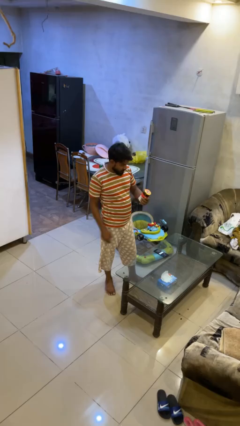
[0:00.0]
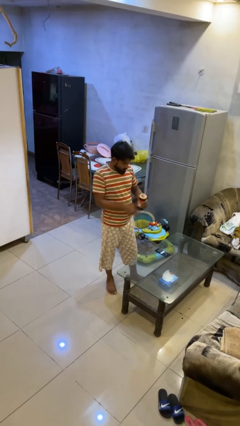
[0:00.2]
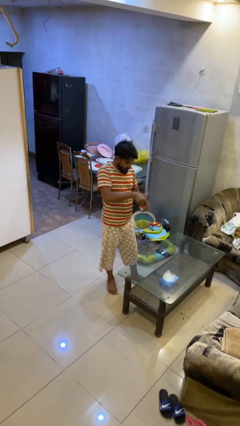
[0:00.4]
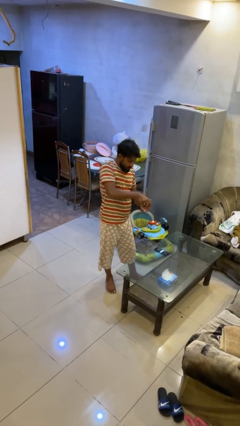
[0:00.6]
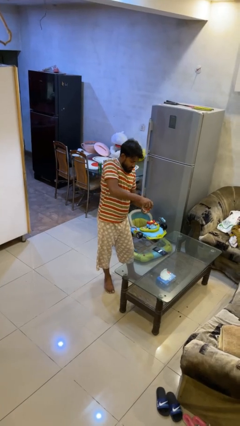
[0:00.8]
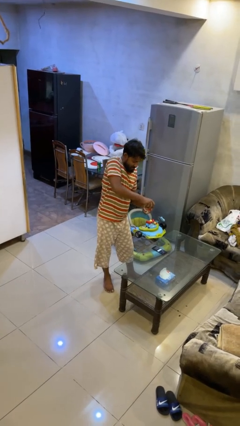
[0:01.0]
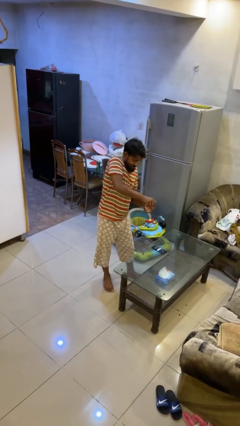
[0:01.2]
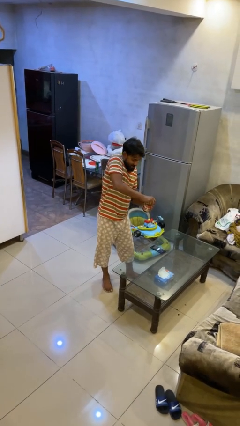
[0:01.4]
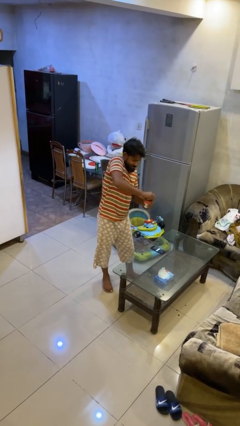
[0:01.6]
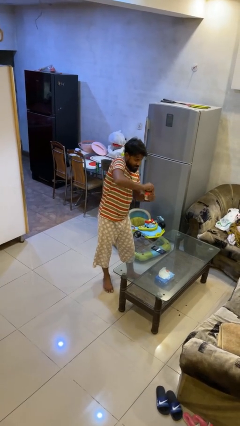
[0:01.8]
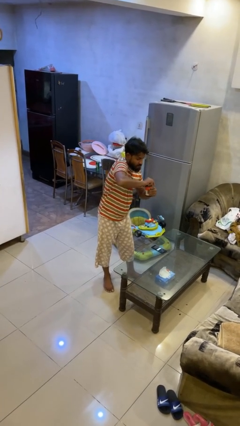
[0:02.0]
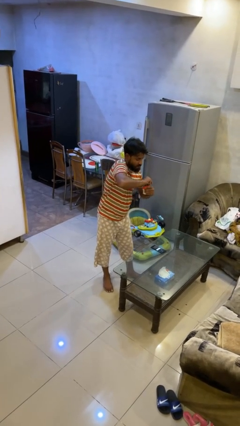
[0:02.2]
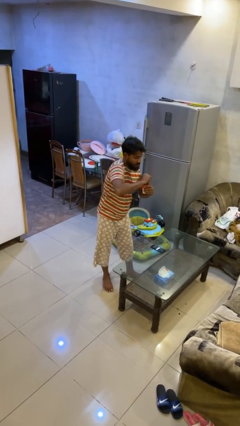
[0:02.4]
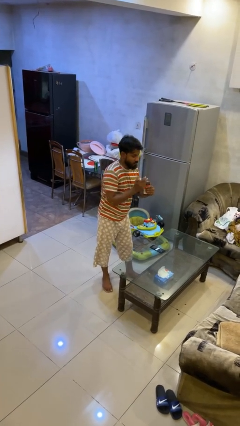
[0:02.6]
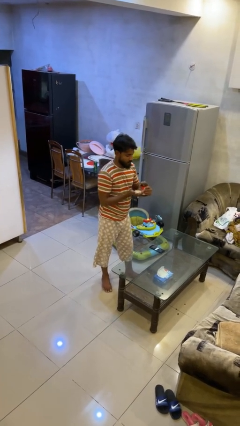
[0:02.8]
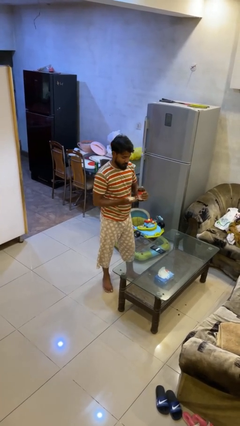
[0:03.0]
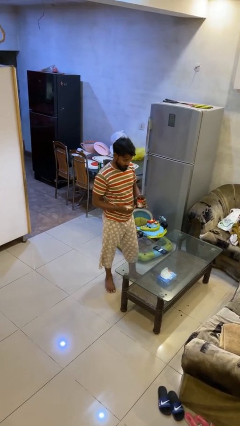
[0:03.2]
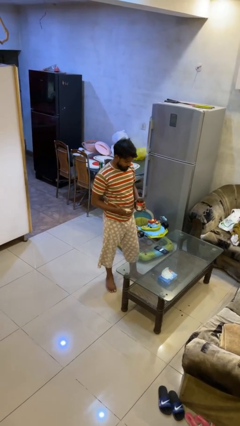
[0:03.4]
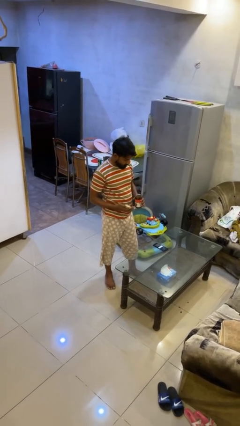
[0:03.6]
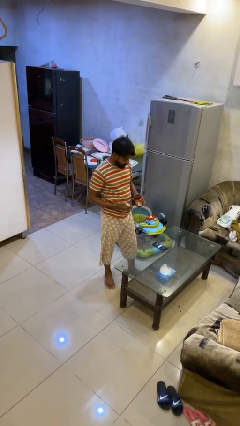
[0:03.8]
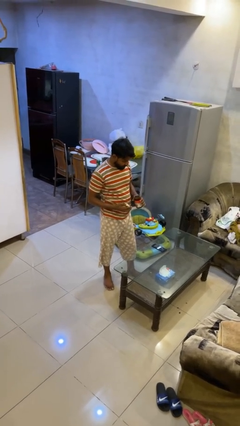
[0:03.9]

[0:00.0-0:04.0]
person opens jar

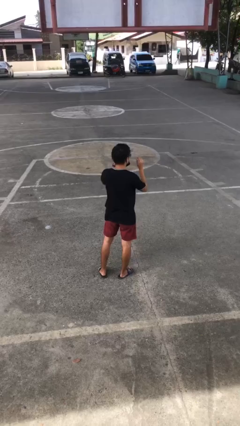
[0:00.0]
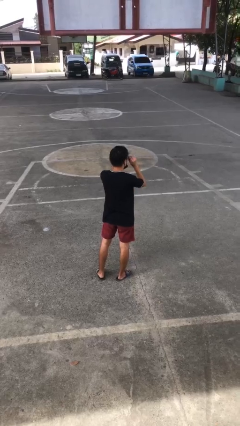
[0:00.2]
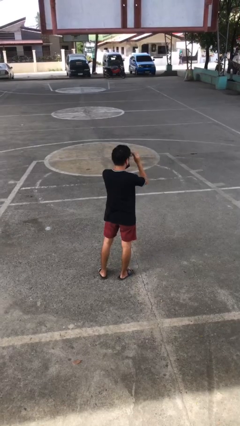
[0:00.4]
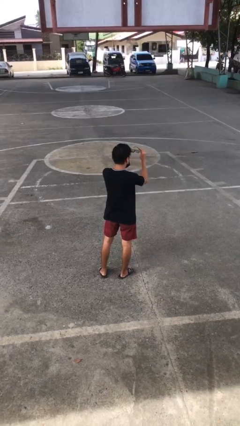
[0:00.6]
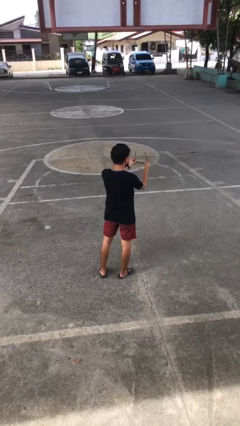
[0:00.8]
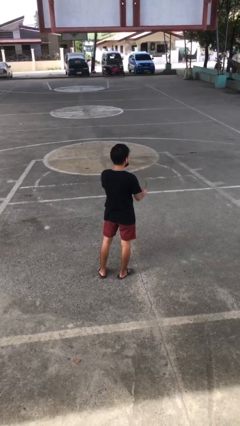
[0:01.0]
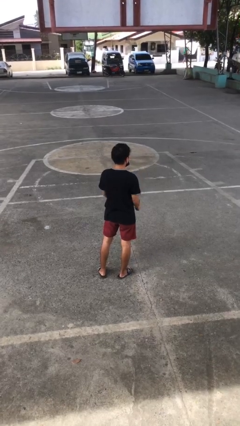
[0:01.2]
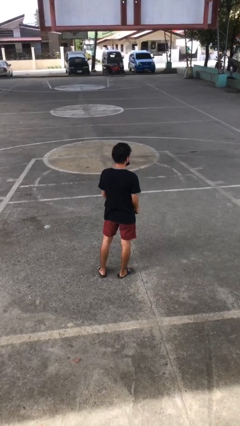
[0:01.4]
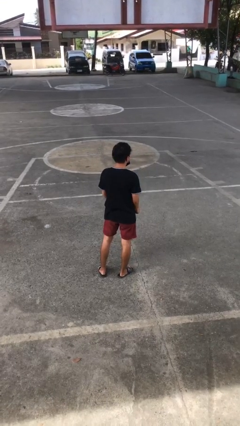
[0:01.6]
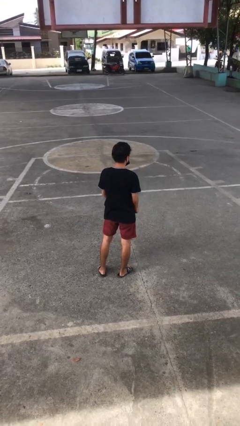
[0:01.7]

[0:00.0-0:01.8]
person takes off glasses

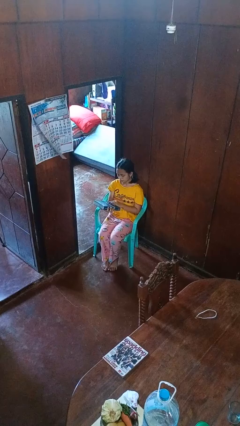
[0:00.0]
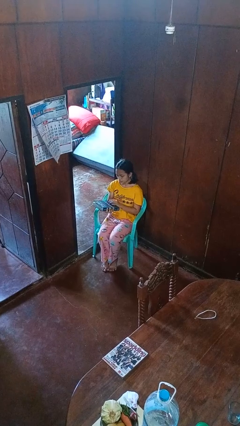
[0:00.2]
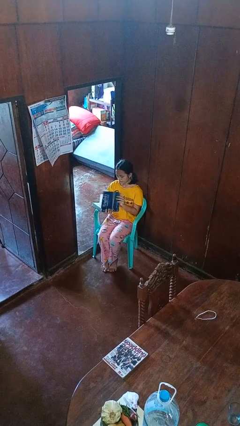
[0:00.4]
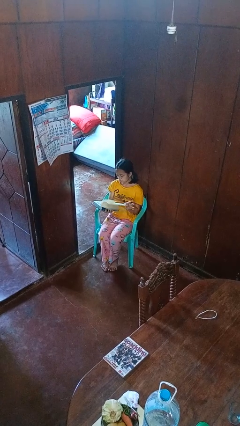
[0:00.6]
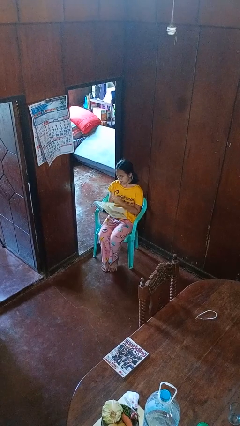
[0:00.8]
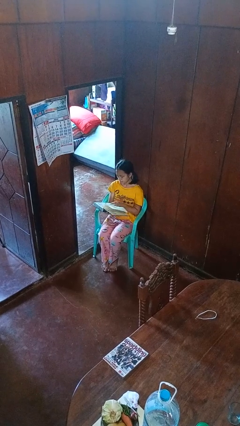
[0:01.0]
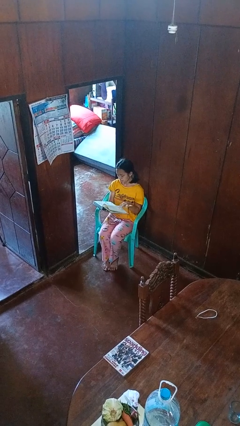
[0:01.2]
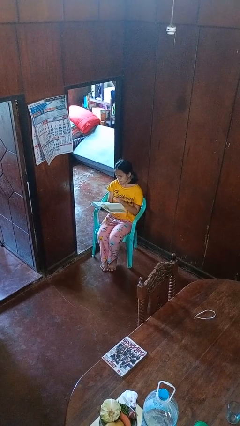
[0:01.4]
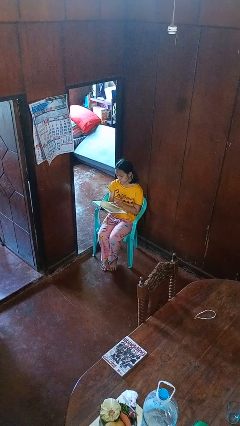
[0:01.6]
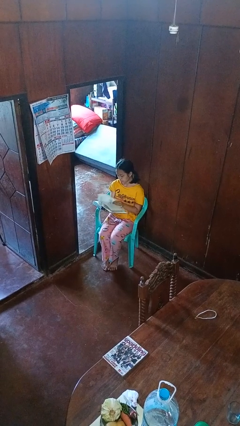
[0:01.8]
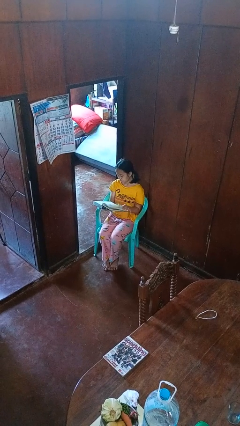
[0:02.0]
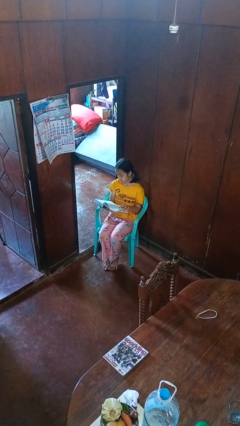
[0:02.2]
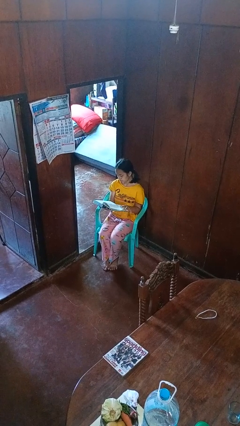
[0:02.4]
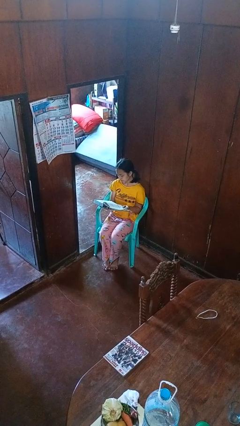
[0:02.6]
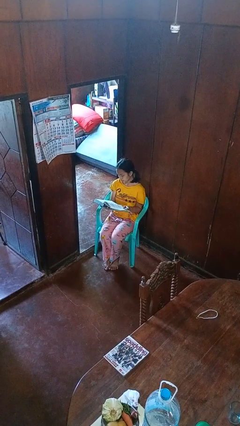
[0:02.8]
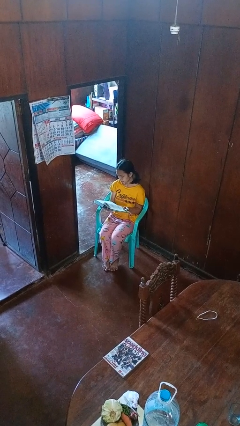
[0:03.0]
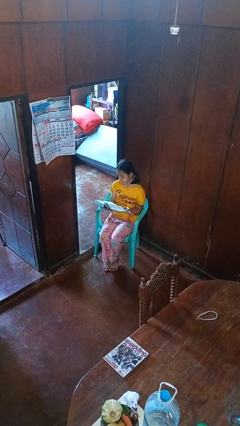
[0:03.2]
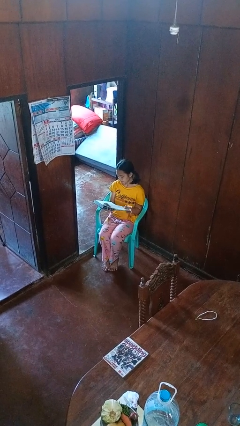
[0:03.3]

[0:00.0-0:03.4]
person reads book

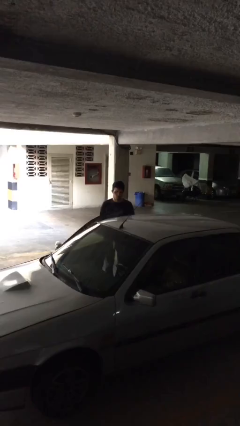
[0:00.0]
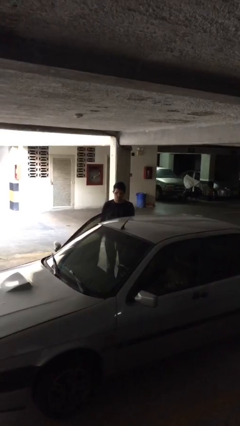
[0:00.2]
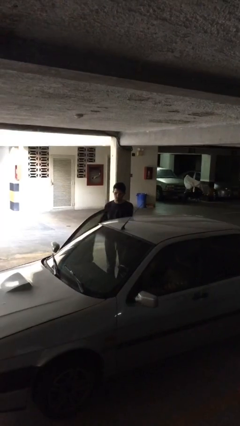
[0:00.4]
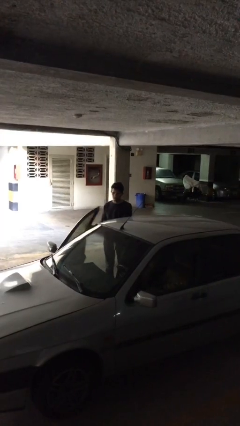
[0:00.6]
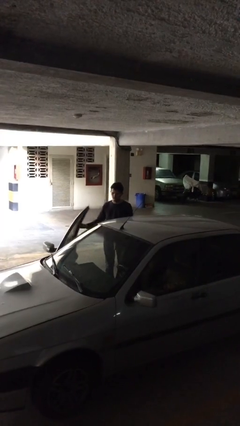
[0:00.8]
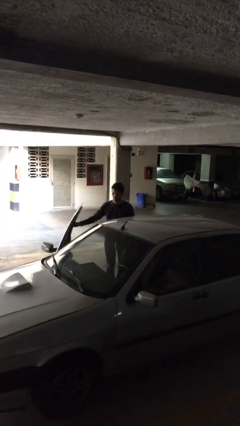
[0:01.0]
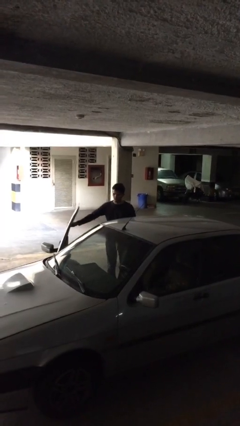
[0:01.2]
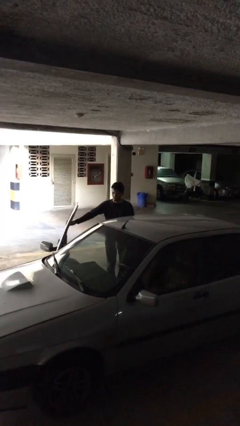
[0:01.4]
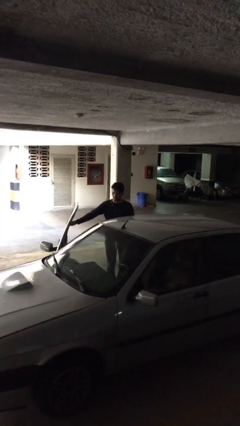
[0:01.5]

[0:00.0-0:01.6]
person opens car door

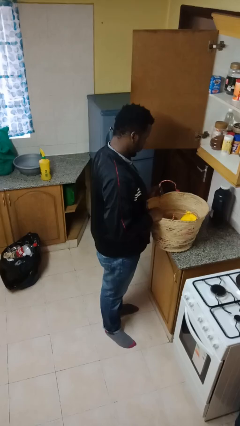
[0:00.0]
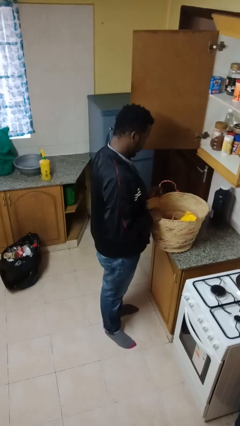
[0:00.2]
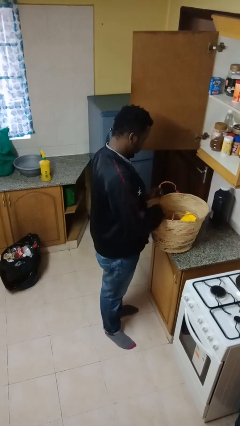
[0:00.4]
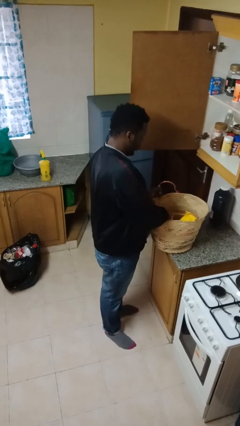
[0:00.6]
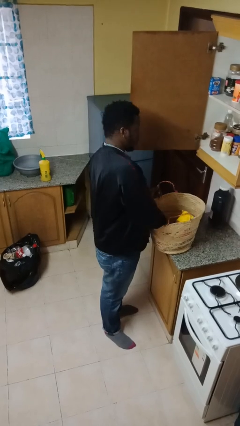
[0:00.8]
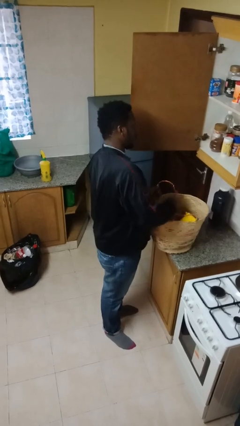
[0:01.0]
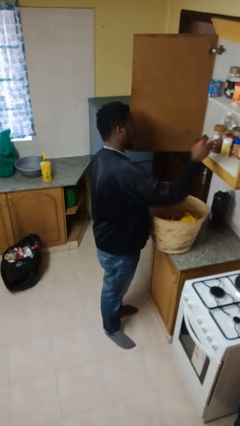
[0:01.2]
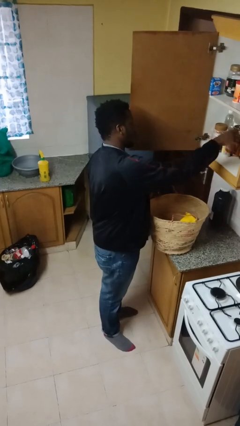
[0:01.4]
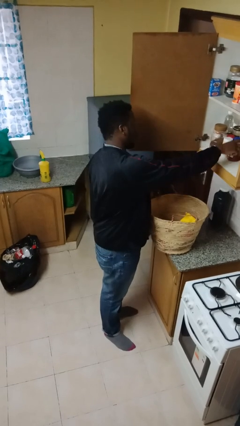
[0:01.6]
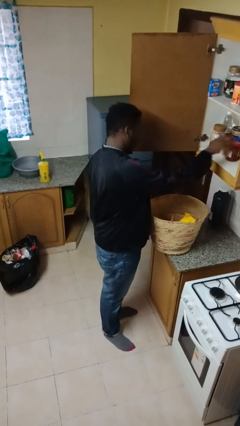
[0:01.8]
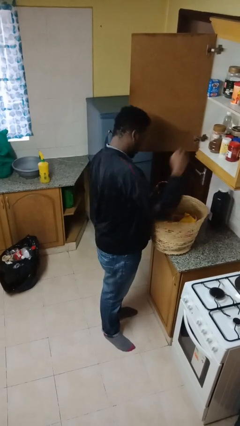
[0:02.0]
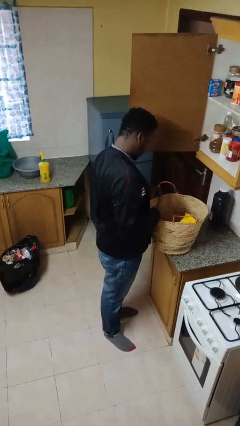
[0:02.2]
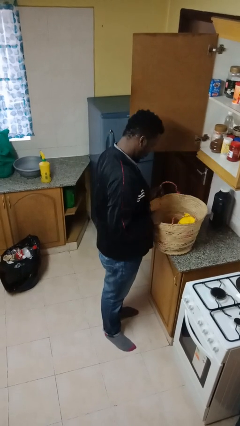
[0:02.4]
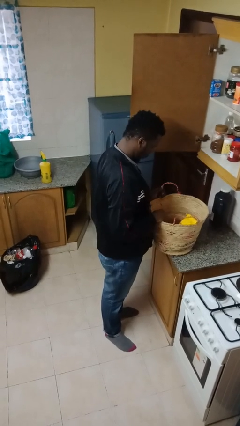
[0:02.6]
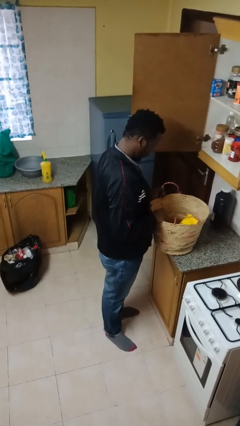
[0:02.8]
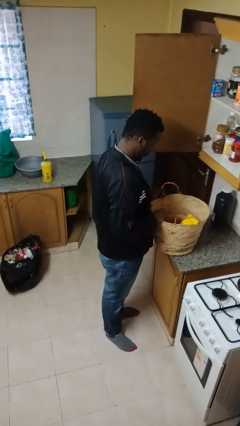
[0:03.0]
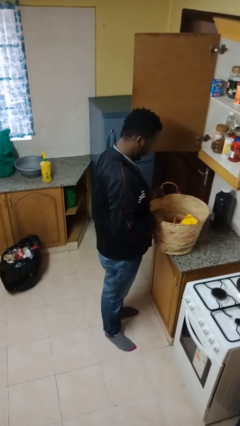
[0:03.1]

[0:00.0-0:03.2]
person loads groceries into cabinet

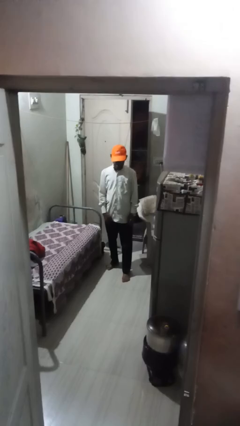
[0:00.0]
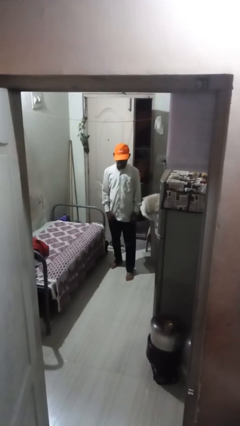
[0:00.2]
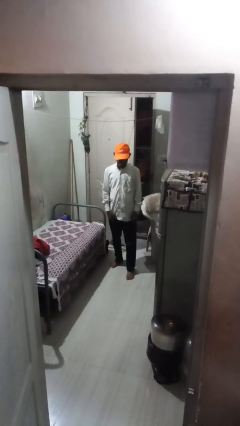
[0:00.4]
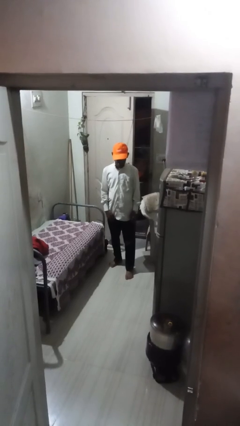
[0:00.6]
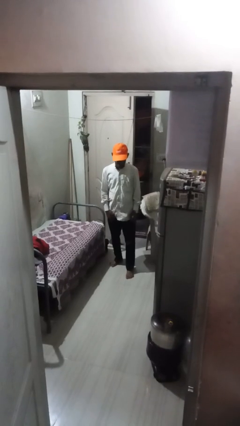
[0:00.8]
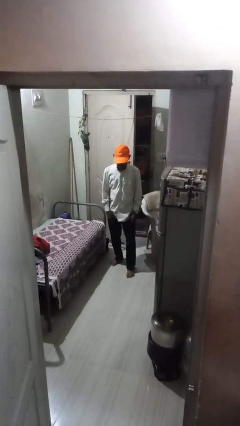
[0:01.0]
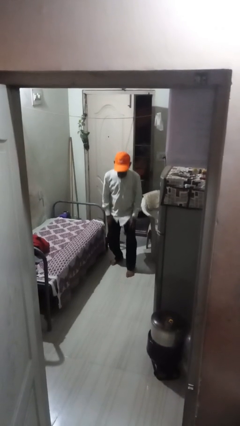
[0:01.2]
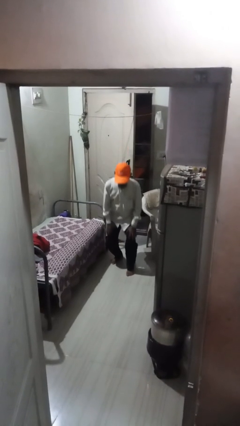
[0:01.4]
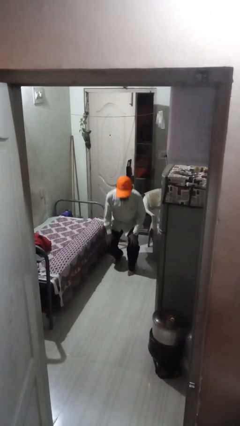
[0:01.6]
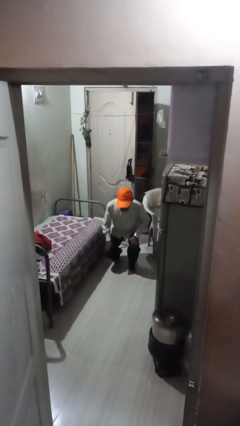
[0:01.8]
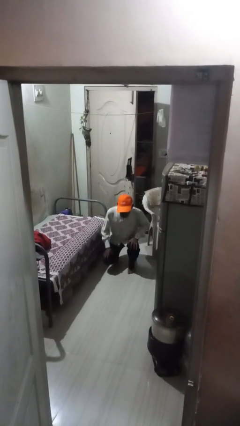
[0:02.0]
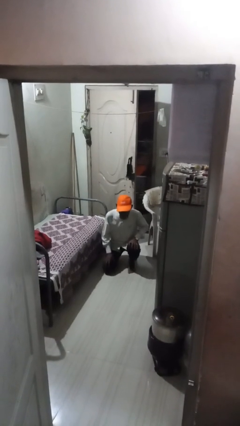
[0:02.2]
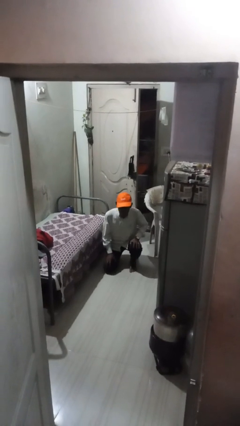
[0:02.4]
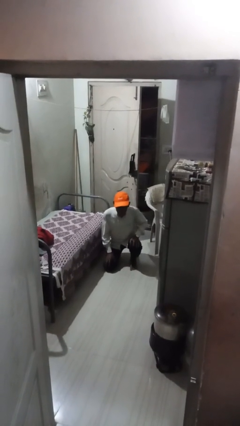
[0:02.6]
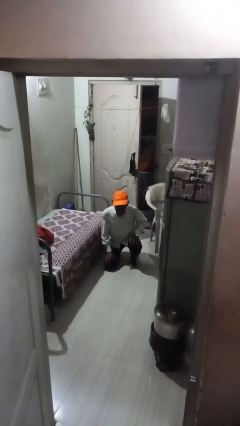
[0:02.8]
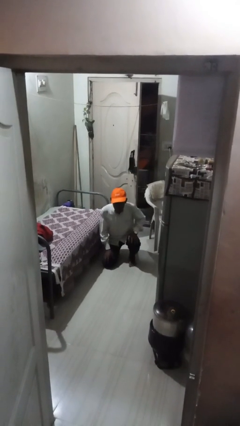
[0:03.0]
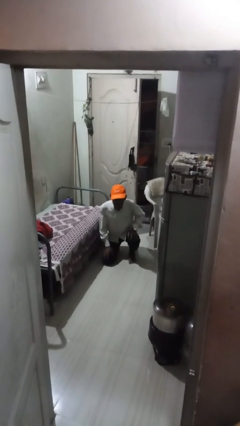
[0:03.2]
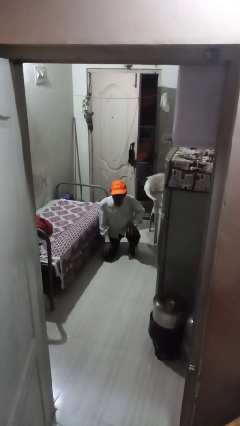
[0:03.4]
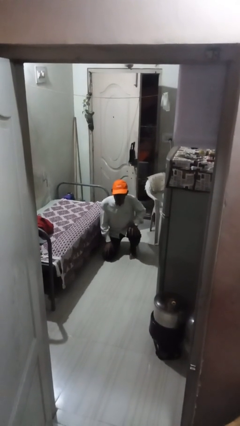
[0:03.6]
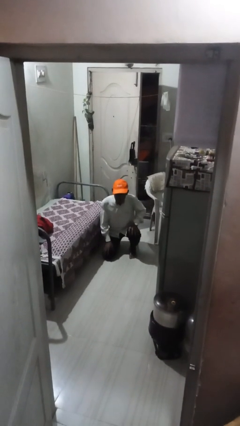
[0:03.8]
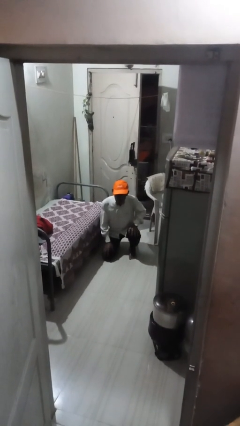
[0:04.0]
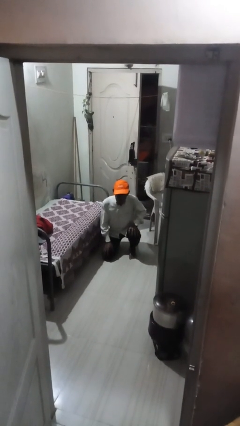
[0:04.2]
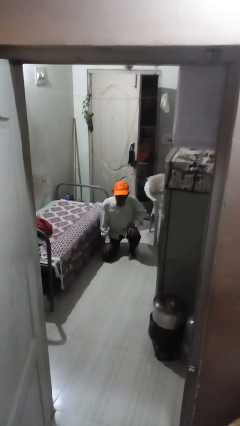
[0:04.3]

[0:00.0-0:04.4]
person kneels
